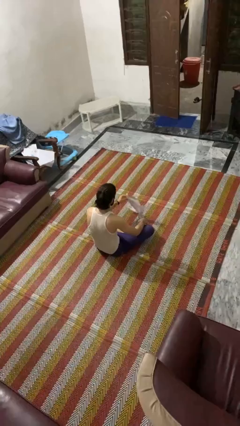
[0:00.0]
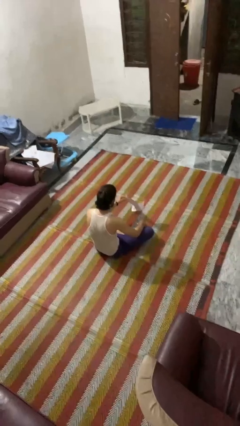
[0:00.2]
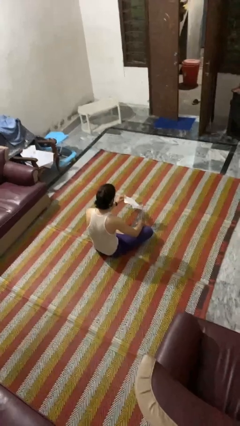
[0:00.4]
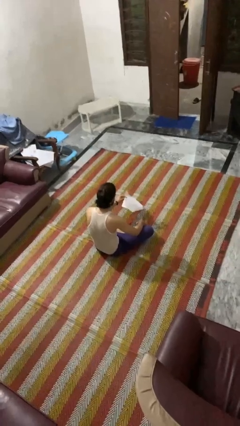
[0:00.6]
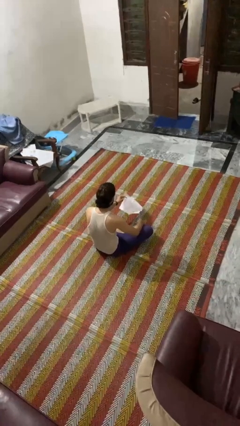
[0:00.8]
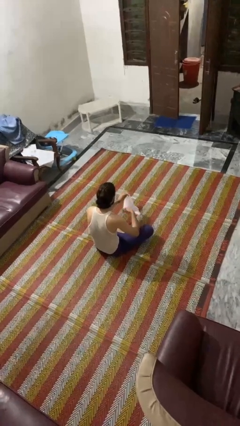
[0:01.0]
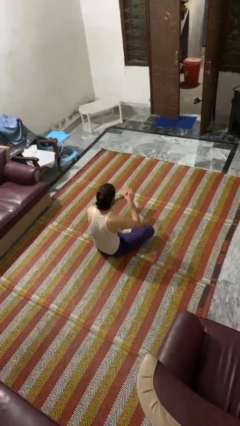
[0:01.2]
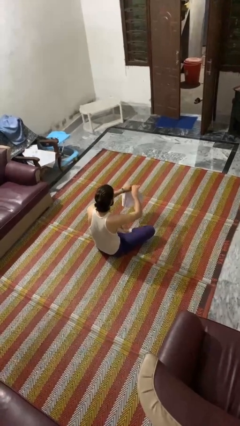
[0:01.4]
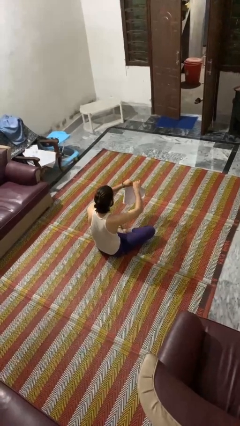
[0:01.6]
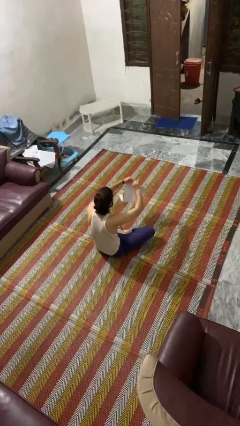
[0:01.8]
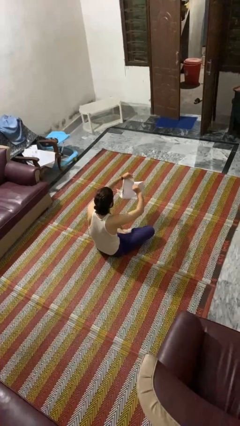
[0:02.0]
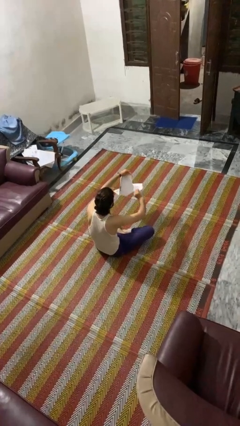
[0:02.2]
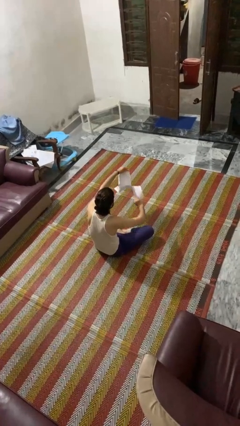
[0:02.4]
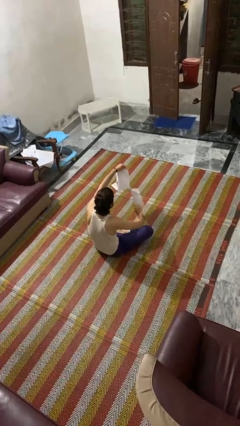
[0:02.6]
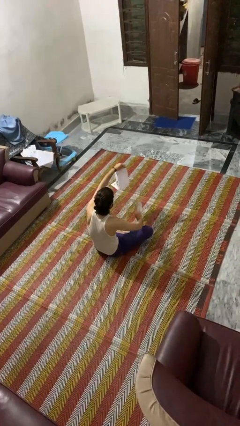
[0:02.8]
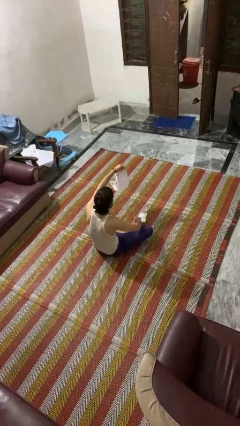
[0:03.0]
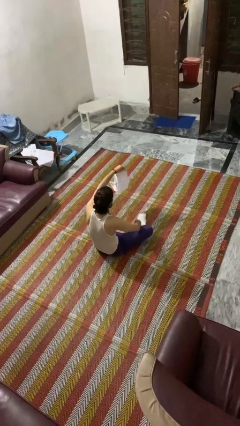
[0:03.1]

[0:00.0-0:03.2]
person tears paper

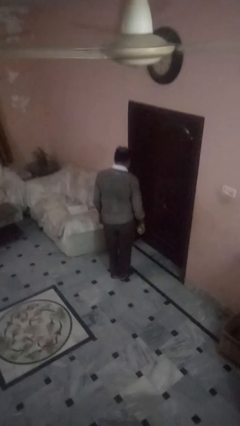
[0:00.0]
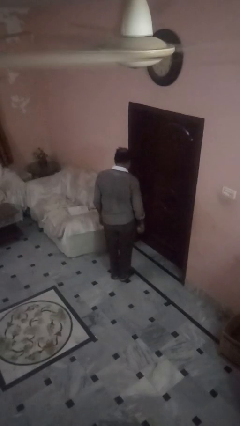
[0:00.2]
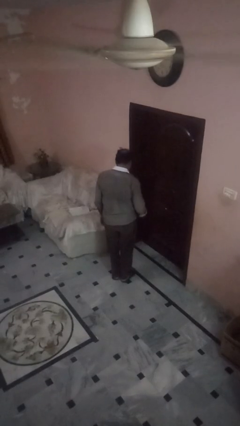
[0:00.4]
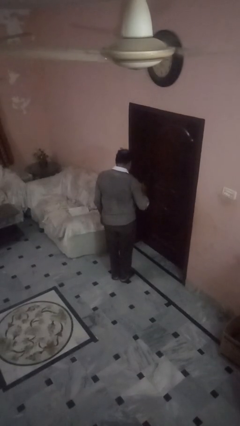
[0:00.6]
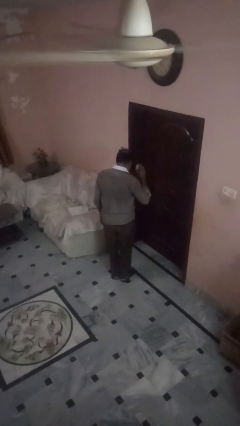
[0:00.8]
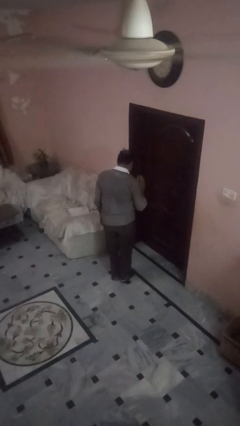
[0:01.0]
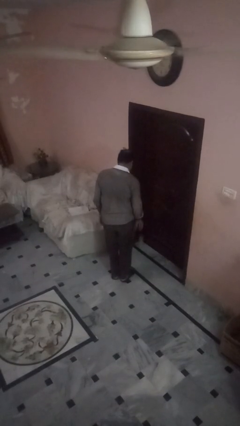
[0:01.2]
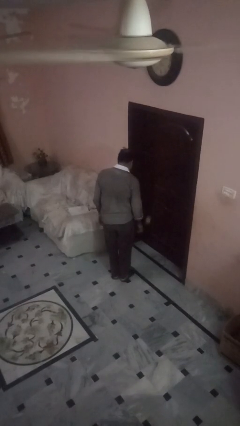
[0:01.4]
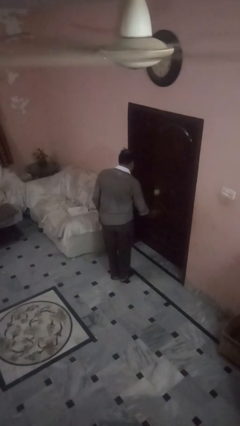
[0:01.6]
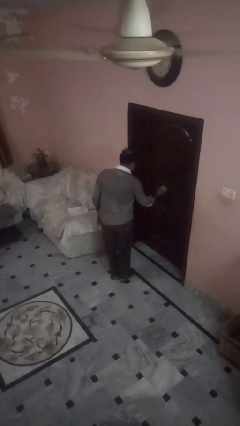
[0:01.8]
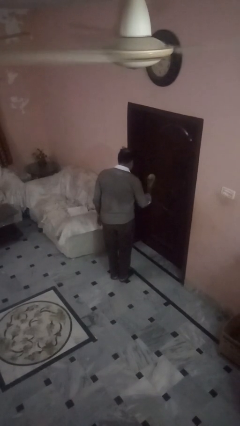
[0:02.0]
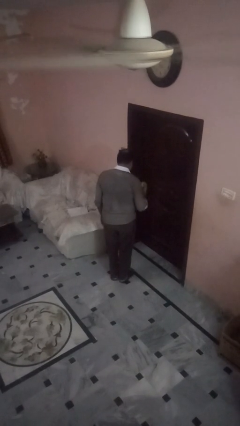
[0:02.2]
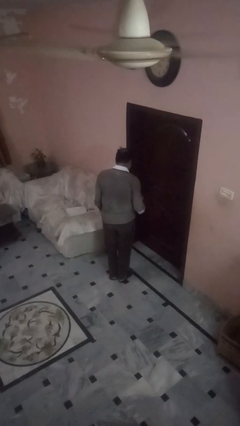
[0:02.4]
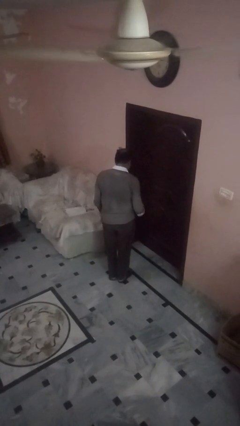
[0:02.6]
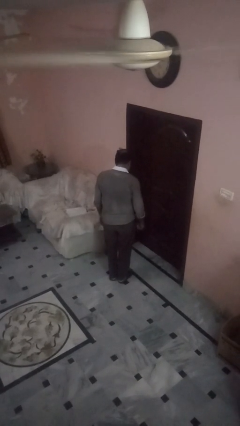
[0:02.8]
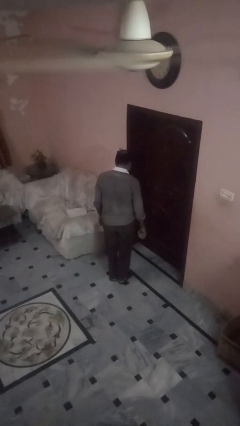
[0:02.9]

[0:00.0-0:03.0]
person bounces ball on floor

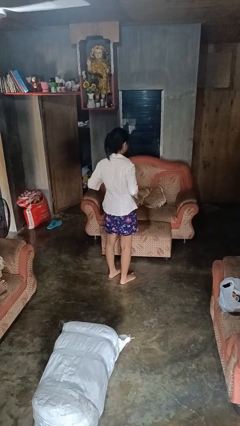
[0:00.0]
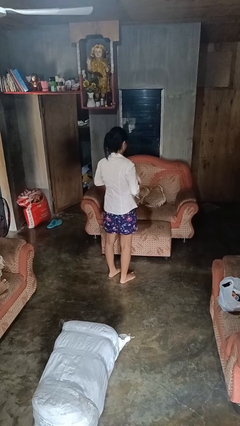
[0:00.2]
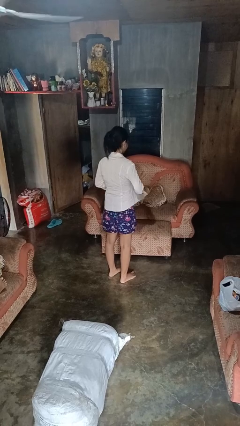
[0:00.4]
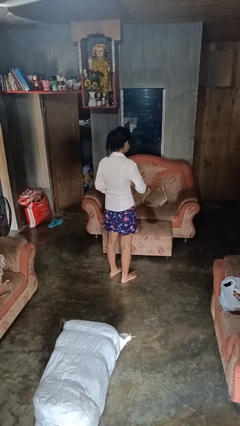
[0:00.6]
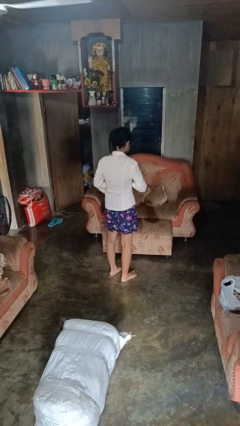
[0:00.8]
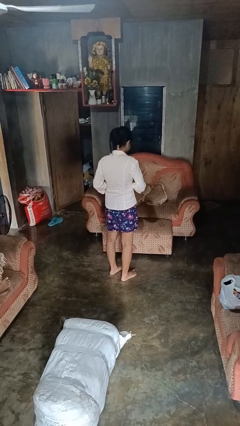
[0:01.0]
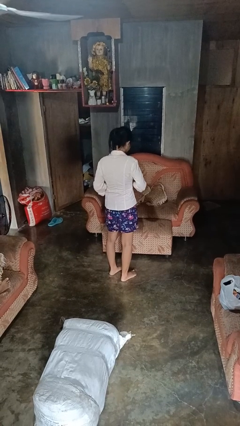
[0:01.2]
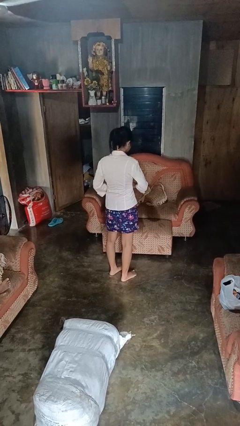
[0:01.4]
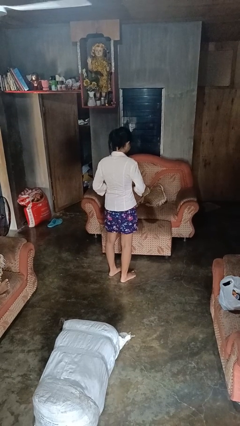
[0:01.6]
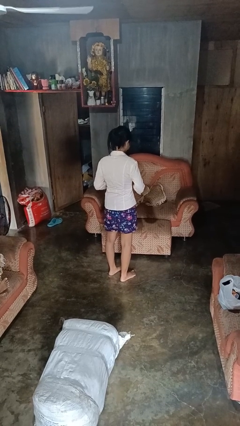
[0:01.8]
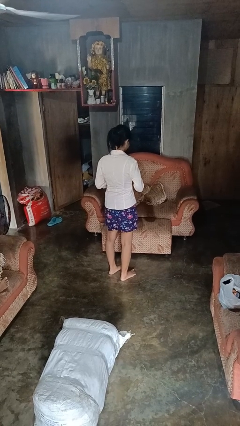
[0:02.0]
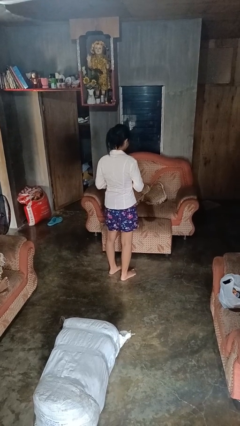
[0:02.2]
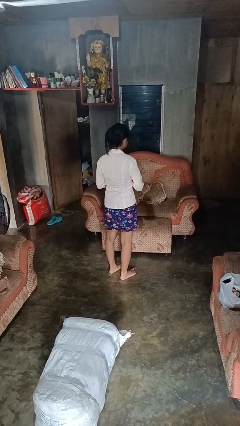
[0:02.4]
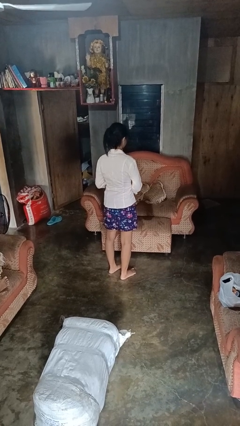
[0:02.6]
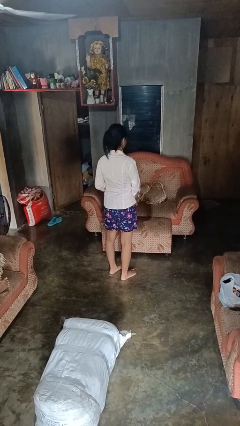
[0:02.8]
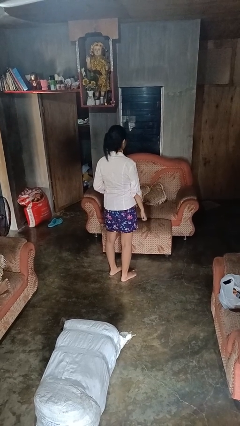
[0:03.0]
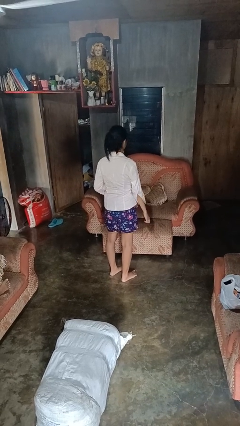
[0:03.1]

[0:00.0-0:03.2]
person buttons shirt

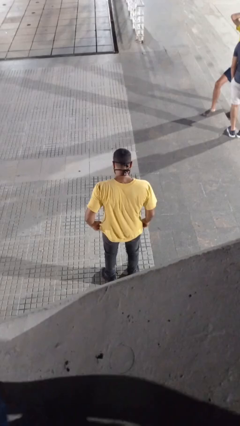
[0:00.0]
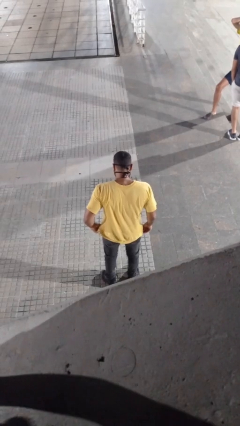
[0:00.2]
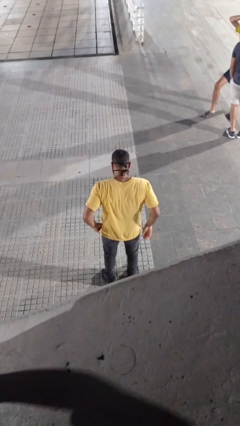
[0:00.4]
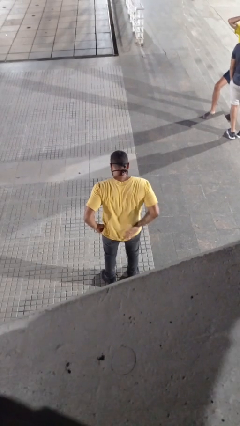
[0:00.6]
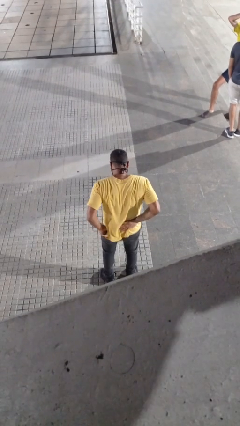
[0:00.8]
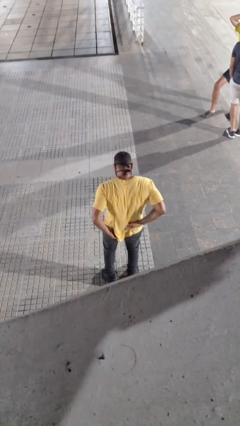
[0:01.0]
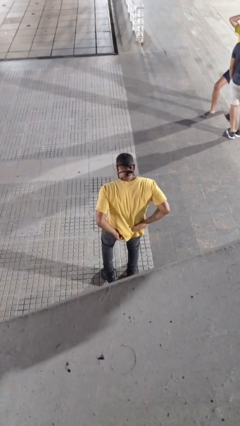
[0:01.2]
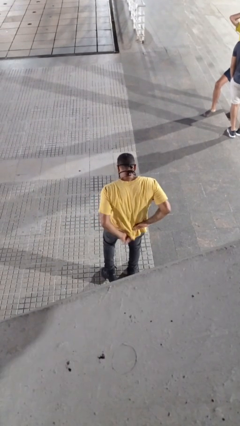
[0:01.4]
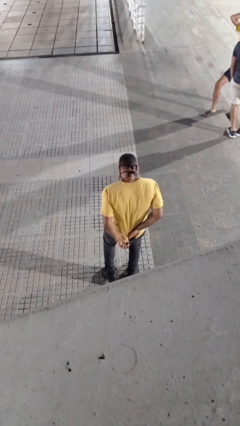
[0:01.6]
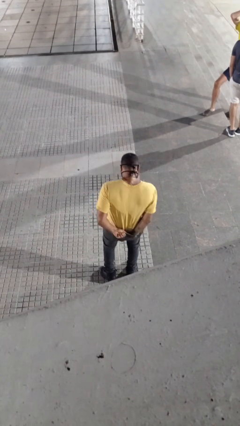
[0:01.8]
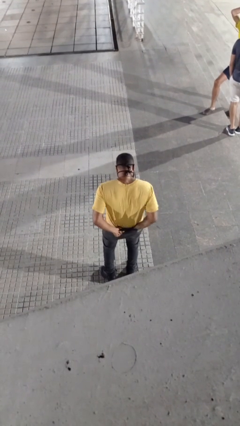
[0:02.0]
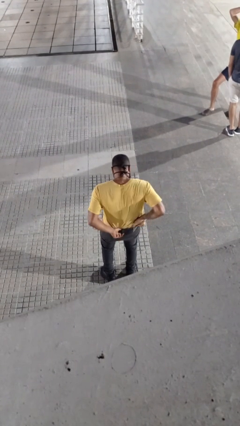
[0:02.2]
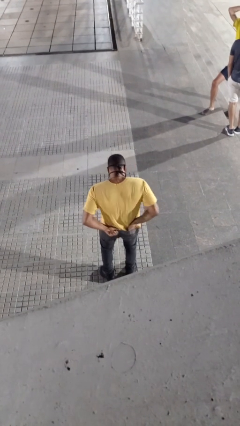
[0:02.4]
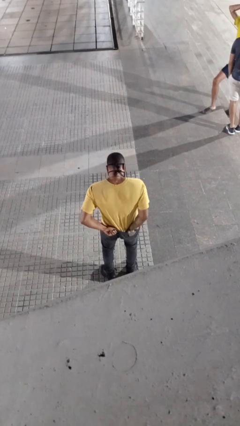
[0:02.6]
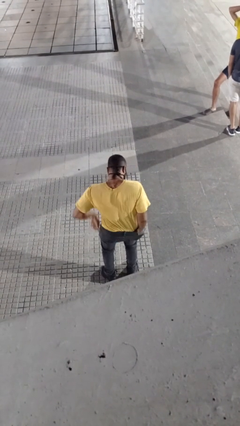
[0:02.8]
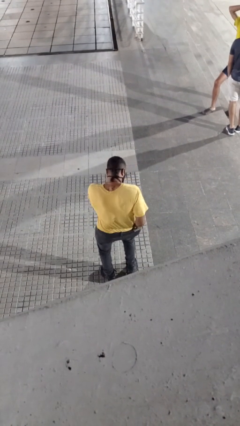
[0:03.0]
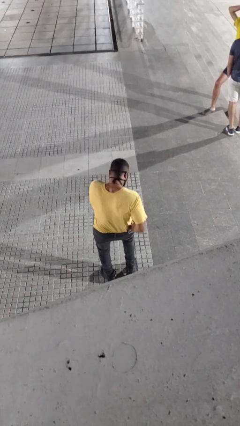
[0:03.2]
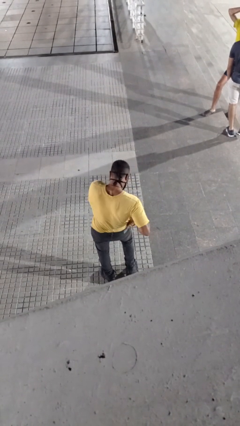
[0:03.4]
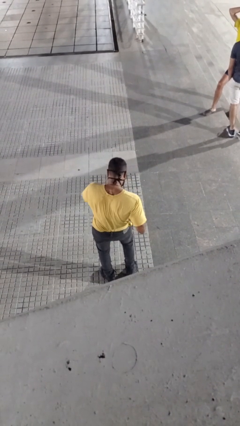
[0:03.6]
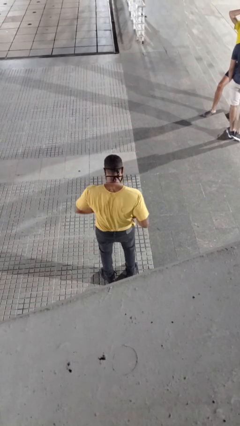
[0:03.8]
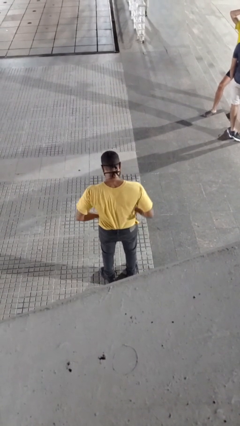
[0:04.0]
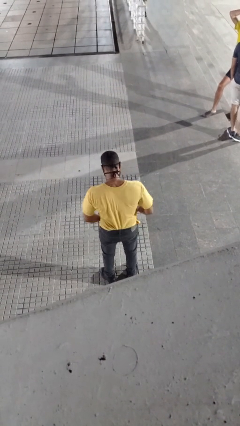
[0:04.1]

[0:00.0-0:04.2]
person tucks in shirt

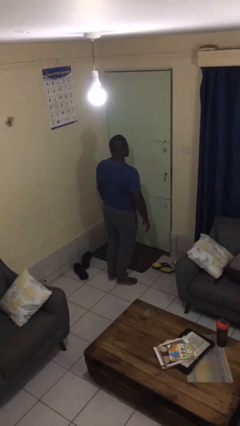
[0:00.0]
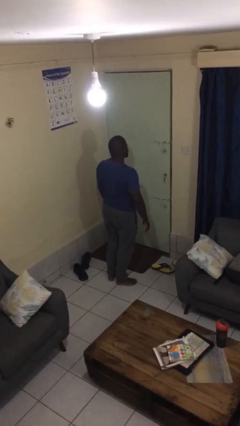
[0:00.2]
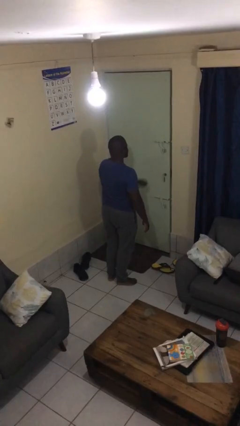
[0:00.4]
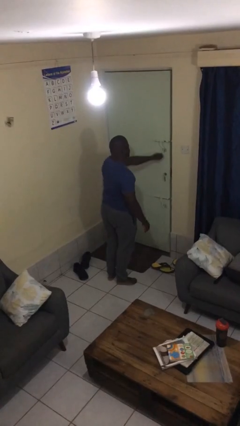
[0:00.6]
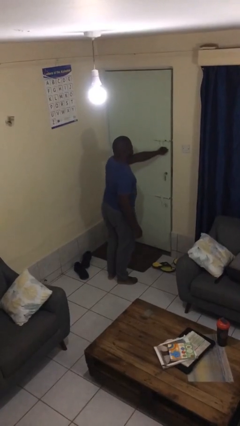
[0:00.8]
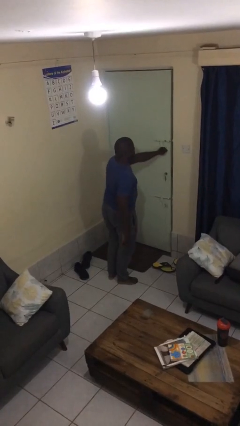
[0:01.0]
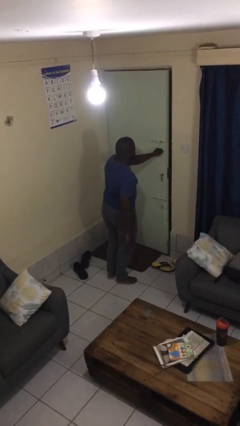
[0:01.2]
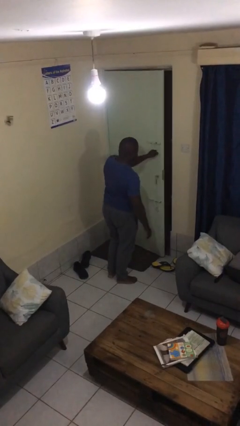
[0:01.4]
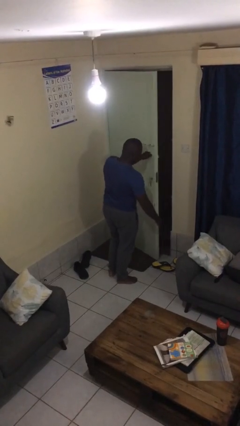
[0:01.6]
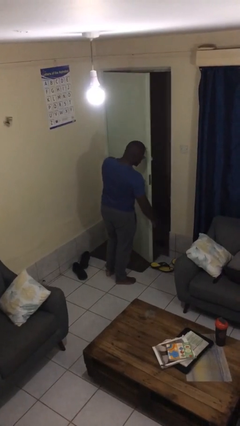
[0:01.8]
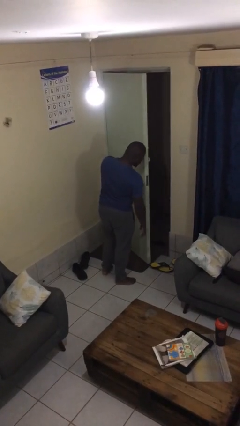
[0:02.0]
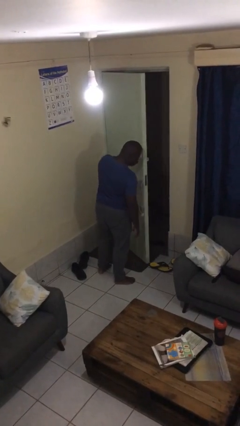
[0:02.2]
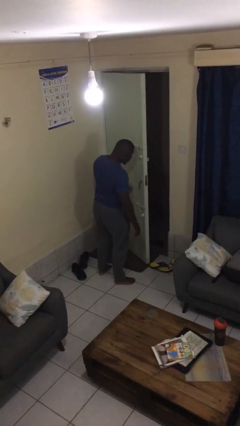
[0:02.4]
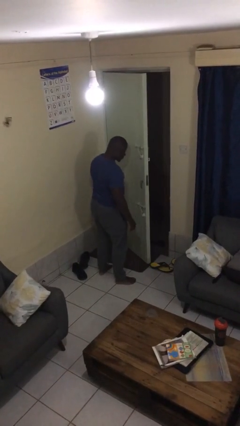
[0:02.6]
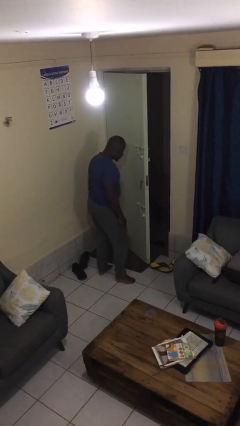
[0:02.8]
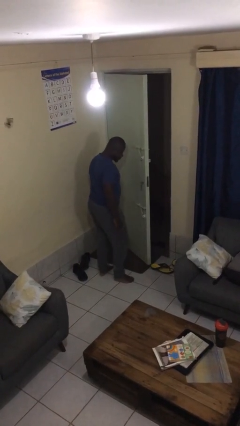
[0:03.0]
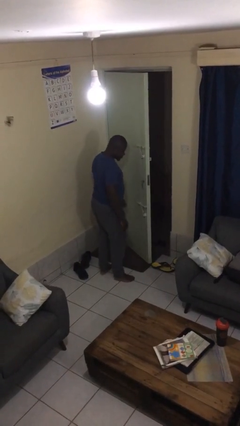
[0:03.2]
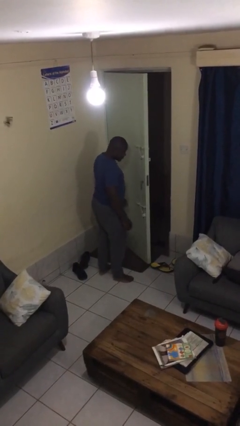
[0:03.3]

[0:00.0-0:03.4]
person opens facility door

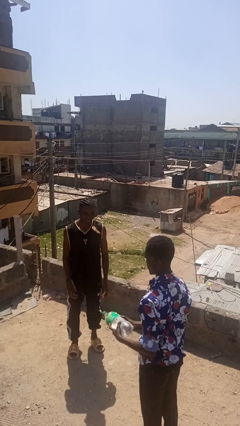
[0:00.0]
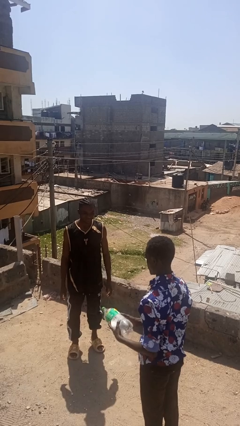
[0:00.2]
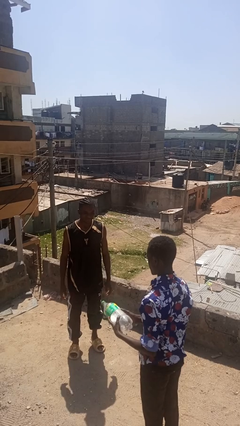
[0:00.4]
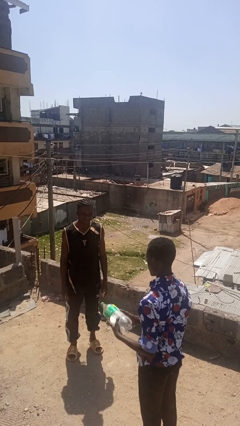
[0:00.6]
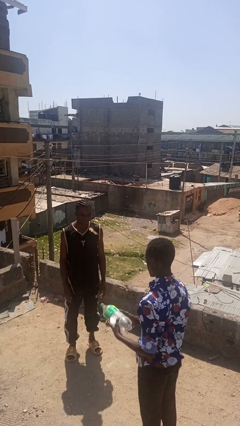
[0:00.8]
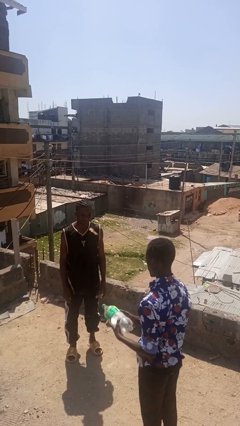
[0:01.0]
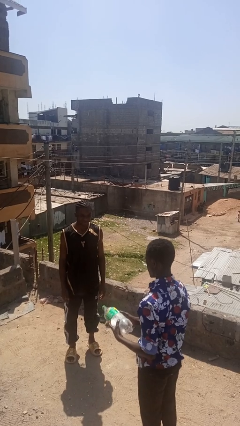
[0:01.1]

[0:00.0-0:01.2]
person catches object from person
